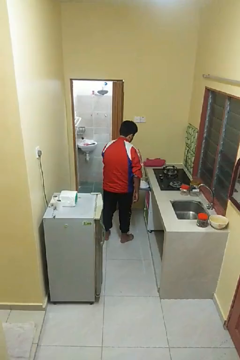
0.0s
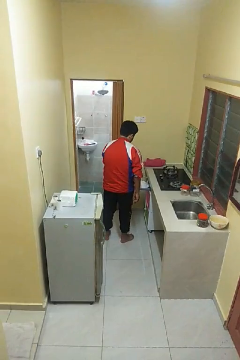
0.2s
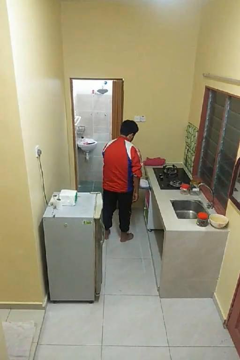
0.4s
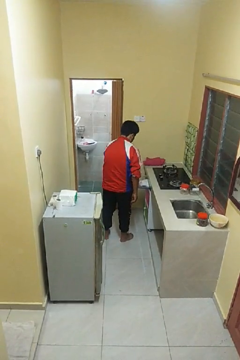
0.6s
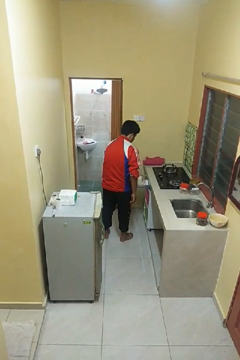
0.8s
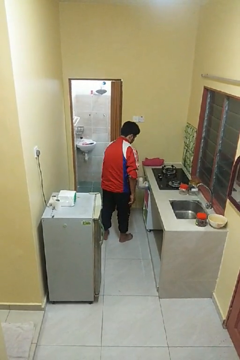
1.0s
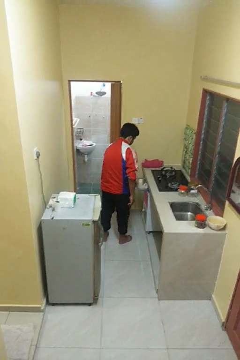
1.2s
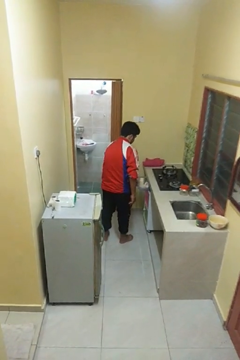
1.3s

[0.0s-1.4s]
person closes kitchen drawer

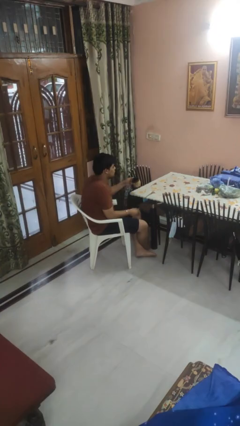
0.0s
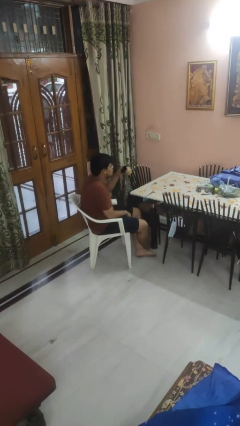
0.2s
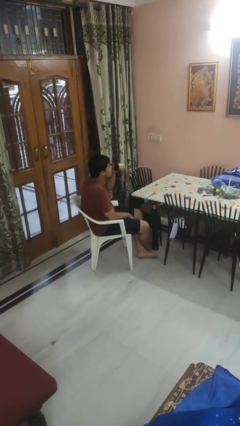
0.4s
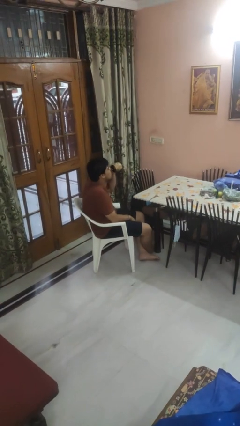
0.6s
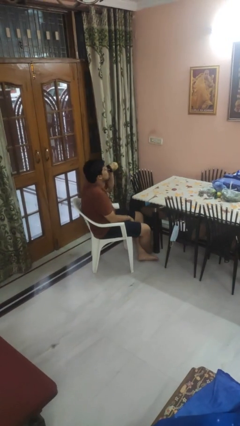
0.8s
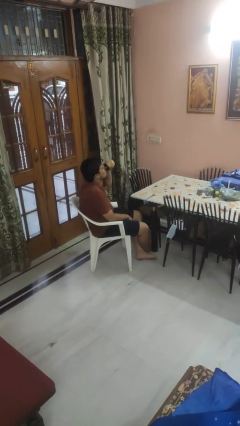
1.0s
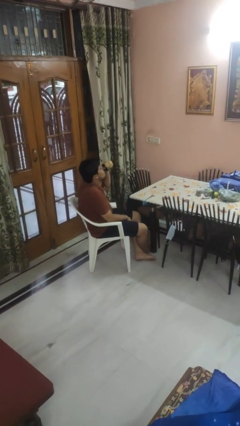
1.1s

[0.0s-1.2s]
person drinks from mug

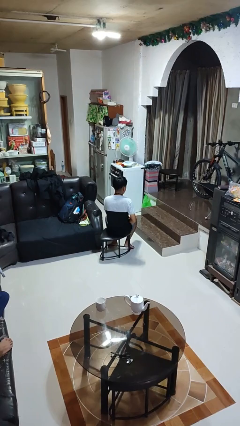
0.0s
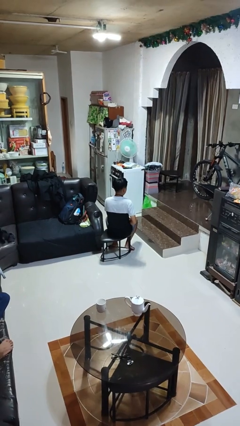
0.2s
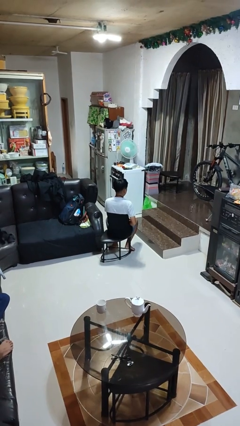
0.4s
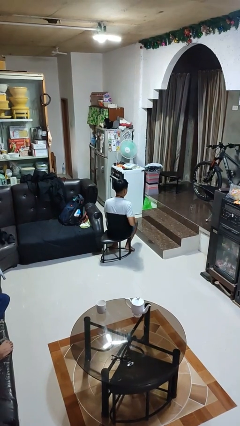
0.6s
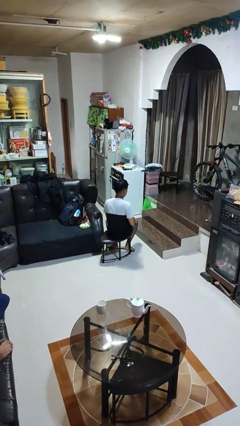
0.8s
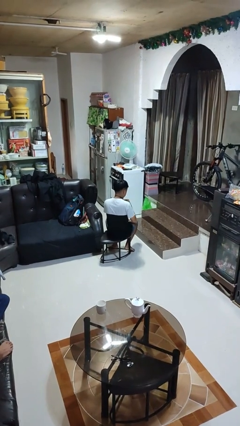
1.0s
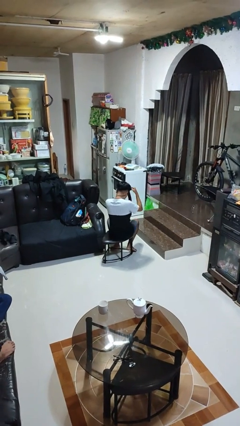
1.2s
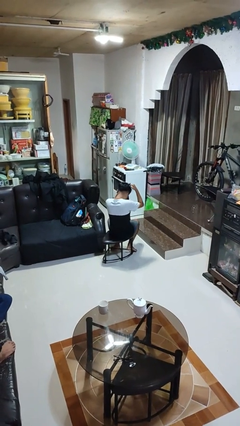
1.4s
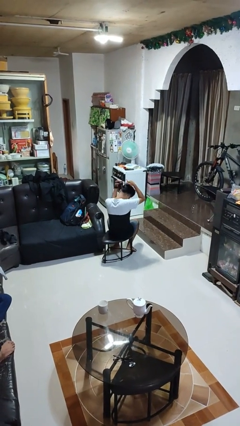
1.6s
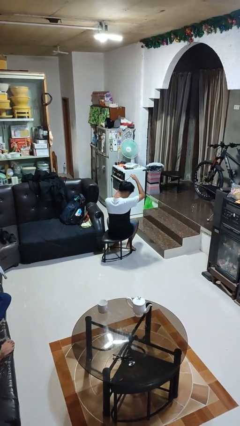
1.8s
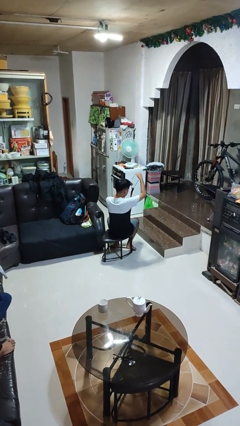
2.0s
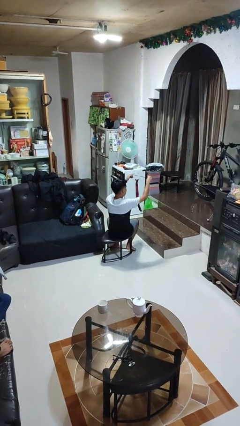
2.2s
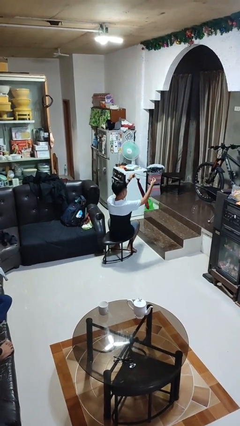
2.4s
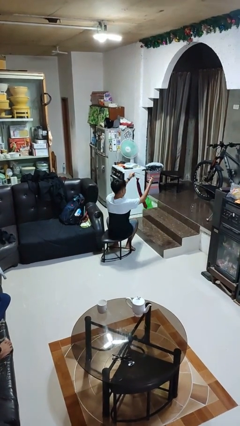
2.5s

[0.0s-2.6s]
person takes off necktie

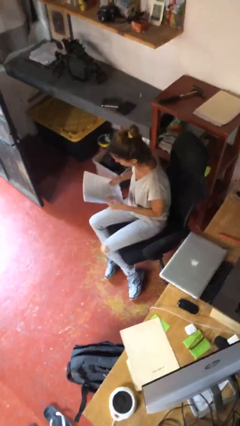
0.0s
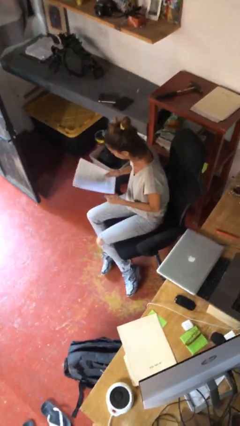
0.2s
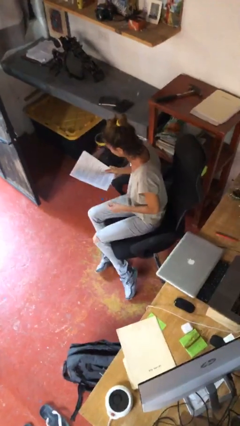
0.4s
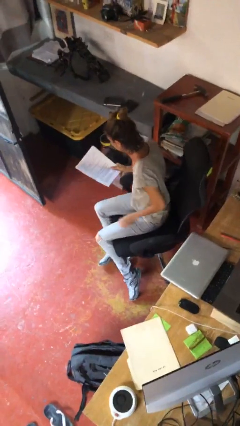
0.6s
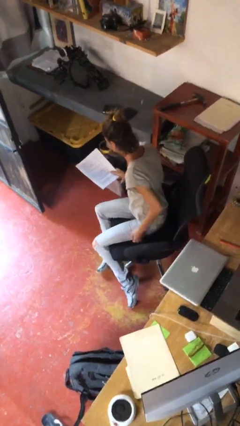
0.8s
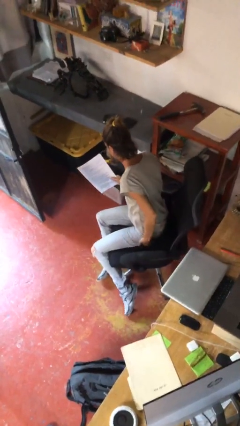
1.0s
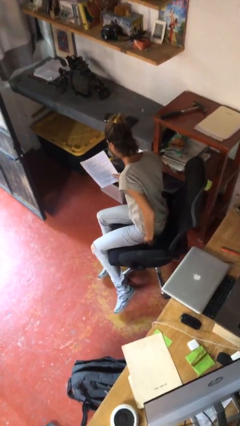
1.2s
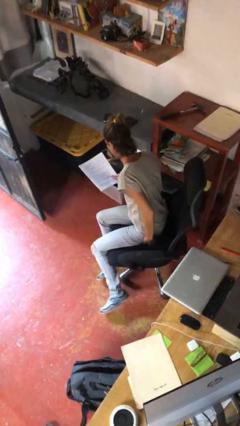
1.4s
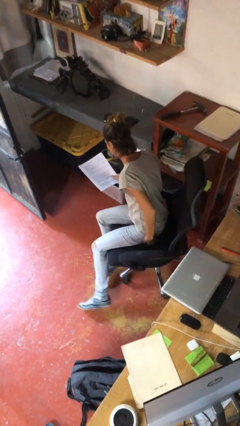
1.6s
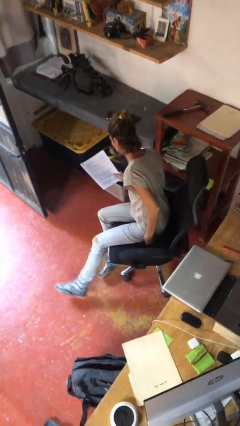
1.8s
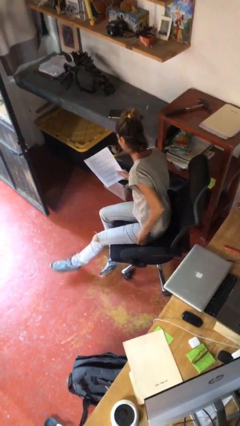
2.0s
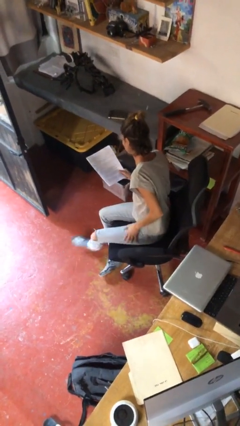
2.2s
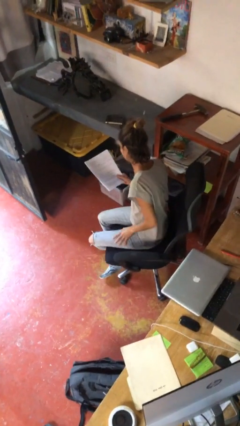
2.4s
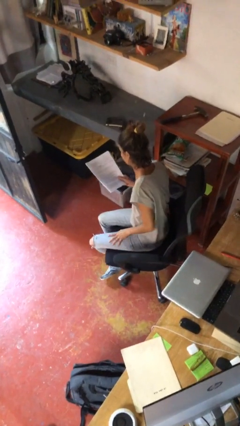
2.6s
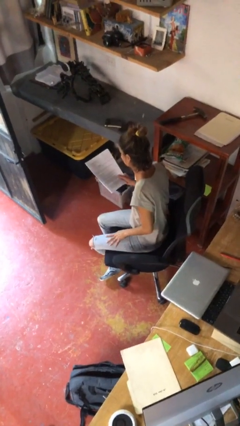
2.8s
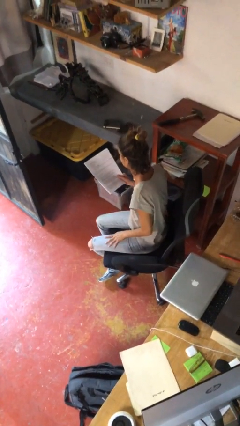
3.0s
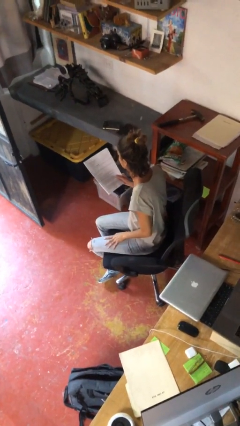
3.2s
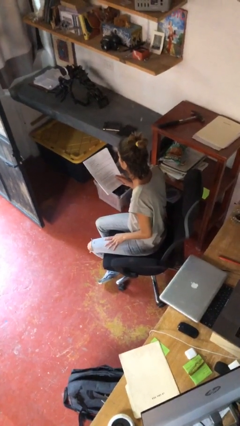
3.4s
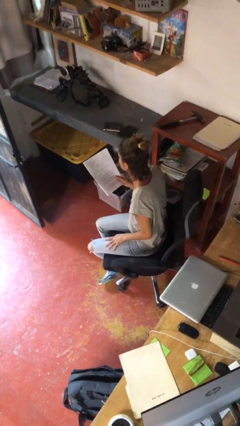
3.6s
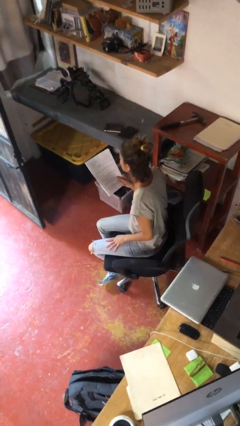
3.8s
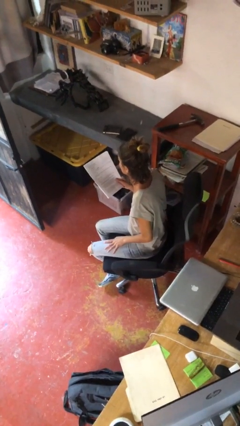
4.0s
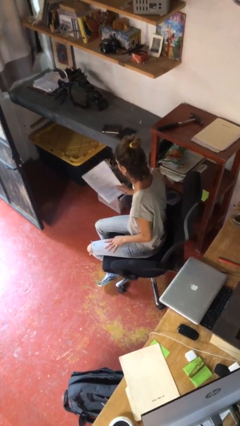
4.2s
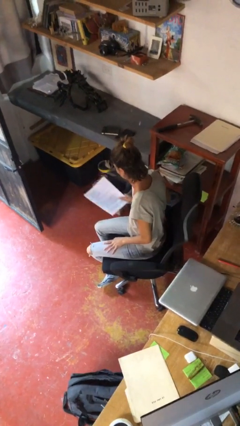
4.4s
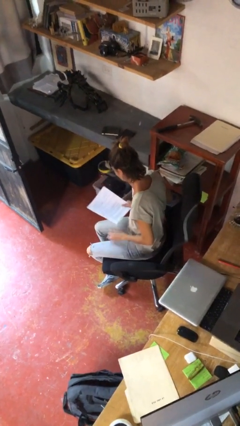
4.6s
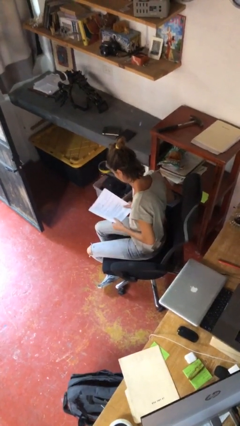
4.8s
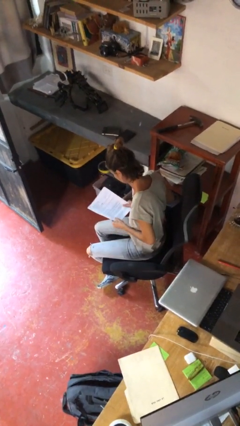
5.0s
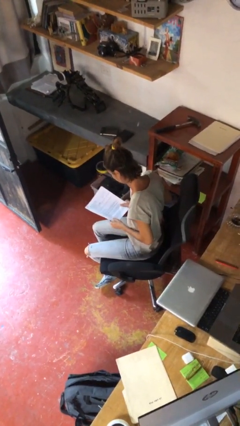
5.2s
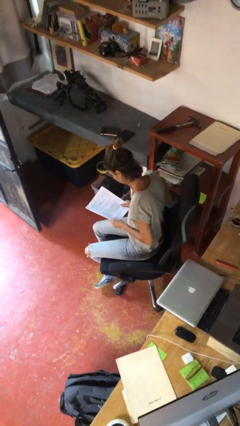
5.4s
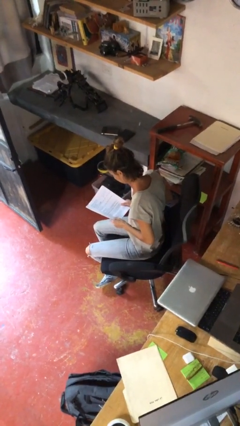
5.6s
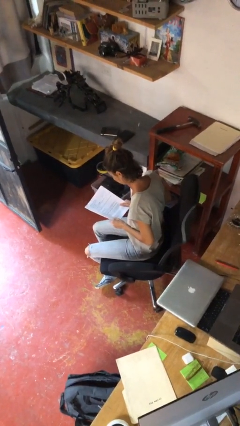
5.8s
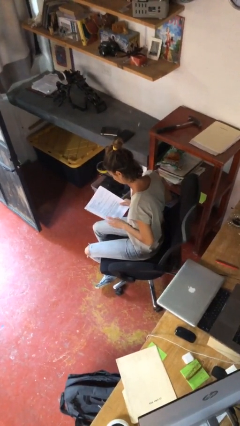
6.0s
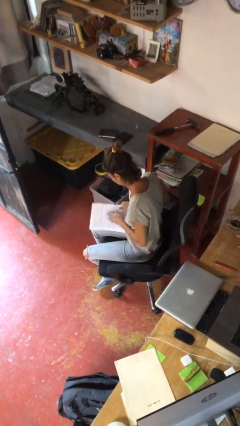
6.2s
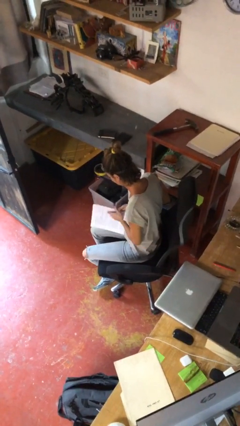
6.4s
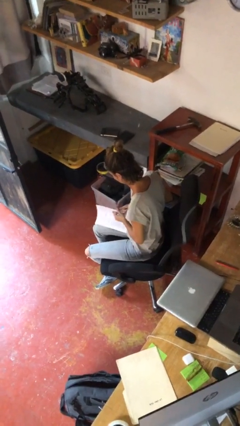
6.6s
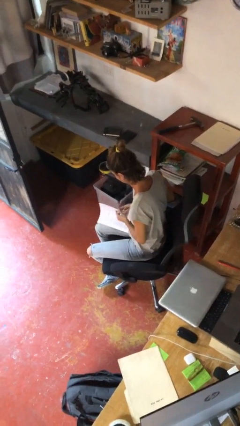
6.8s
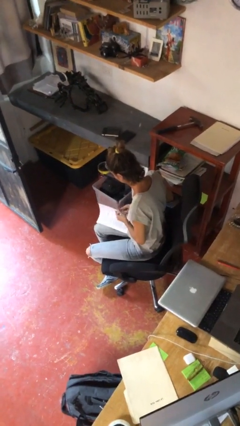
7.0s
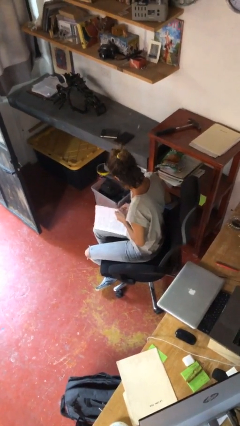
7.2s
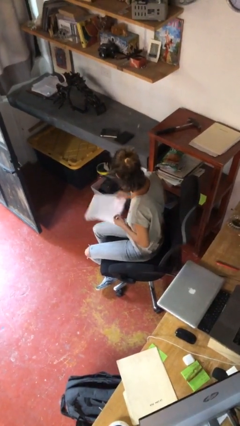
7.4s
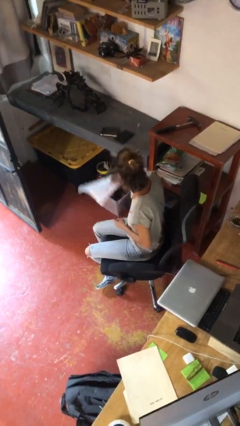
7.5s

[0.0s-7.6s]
person reads document

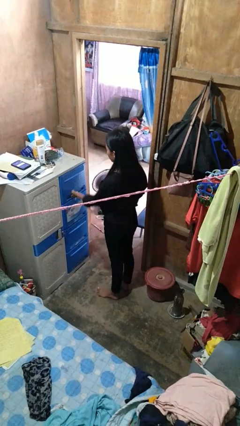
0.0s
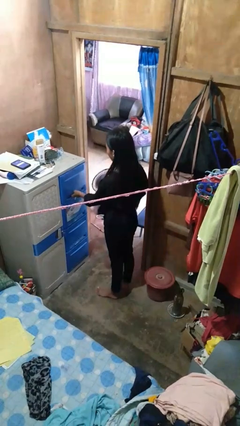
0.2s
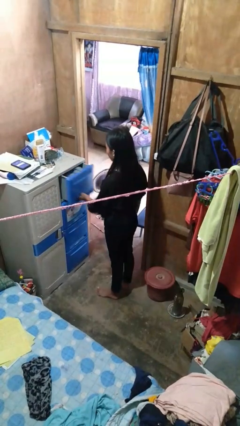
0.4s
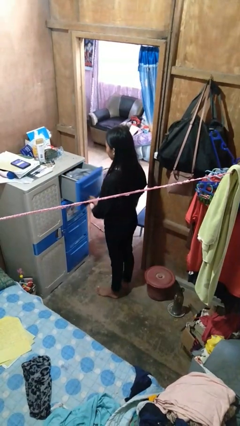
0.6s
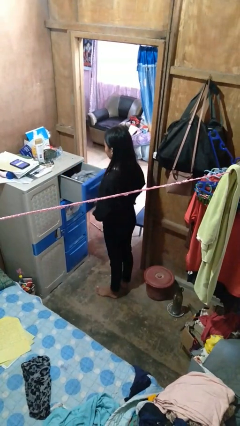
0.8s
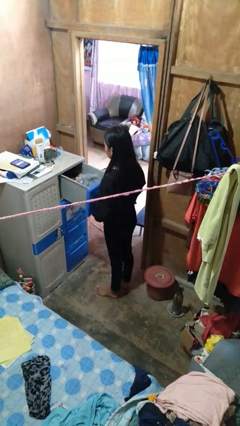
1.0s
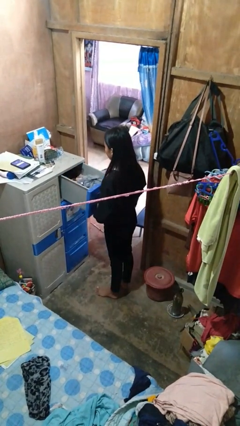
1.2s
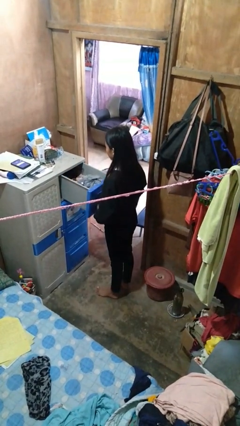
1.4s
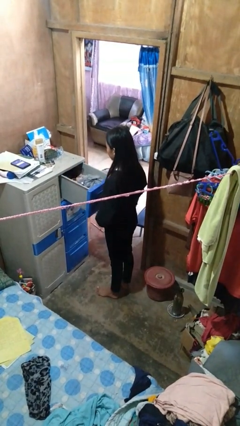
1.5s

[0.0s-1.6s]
person opens dresser drawer

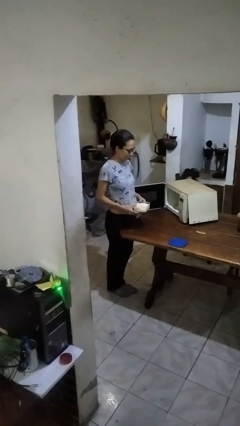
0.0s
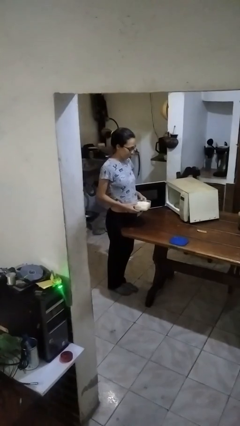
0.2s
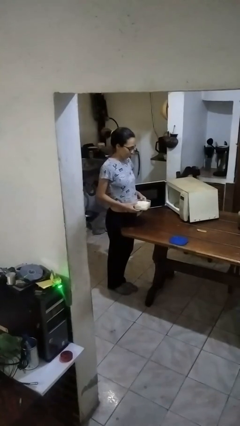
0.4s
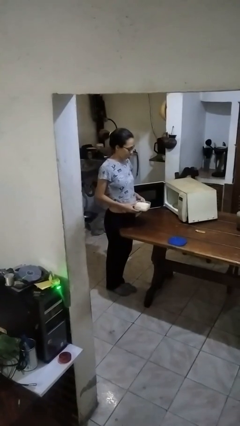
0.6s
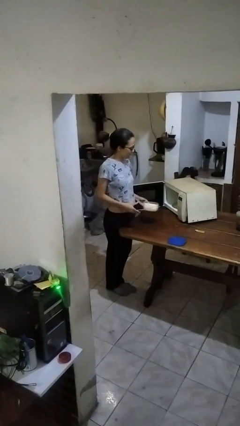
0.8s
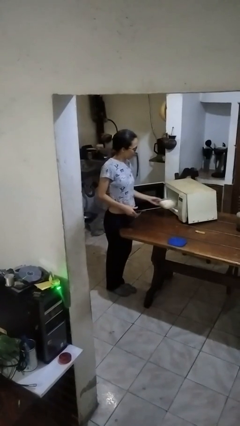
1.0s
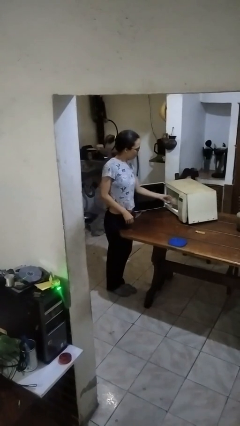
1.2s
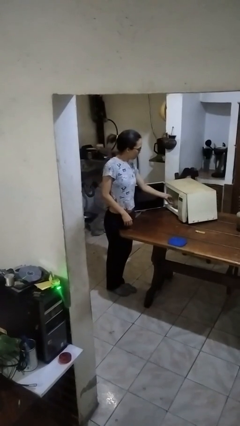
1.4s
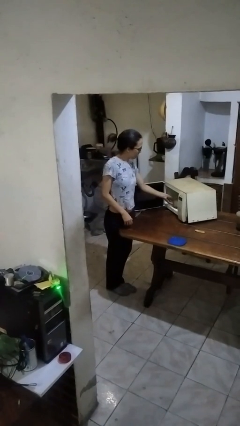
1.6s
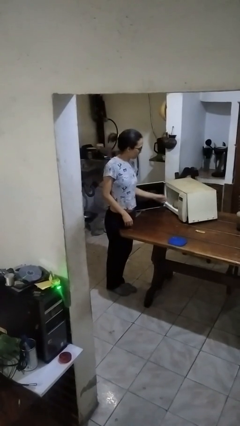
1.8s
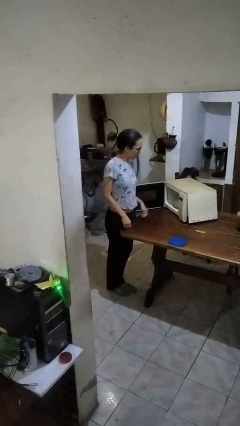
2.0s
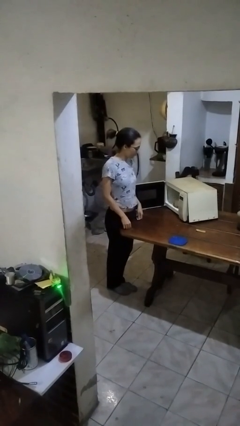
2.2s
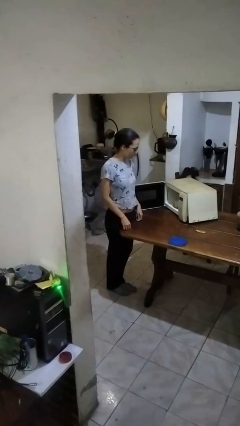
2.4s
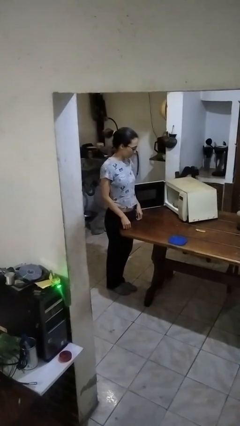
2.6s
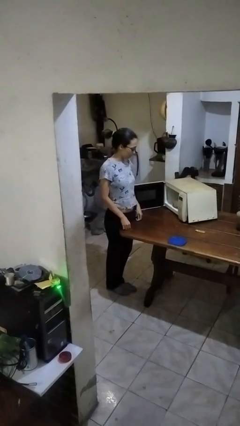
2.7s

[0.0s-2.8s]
person puts object into microwave

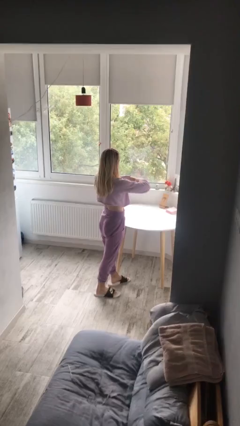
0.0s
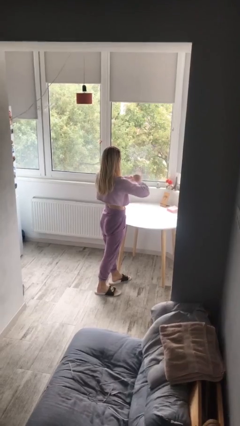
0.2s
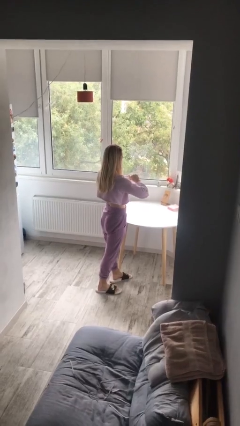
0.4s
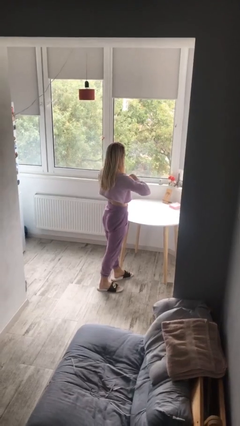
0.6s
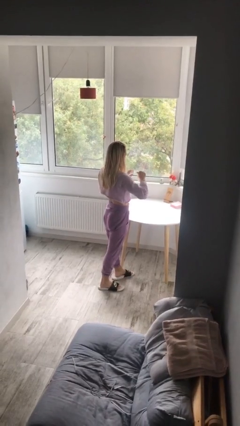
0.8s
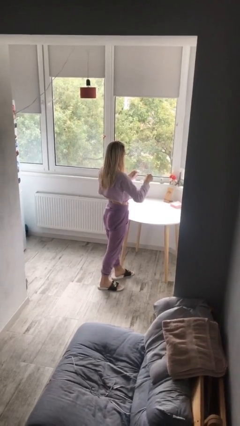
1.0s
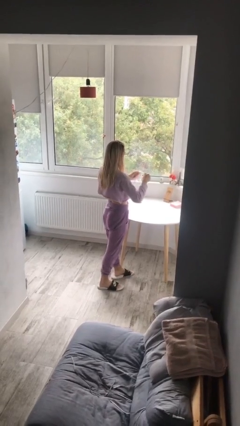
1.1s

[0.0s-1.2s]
person tears paper
